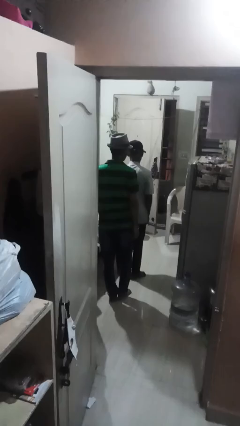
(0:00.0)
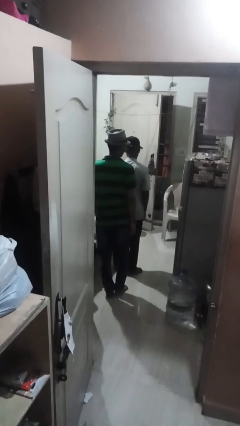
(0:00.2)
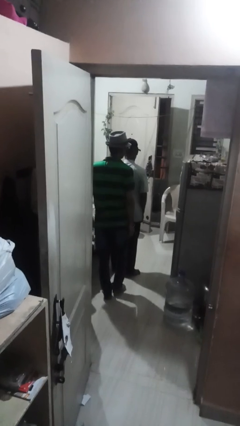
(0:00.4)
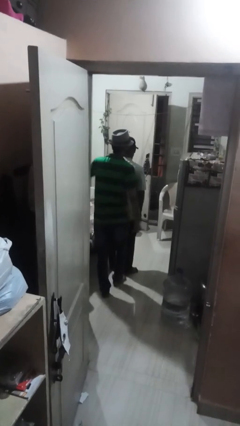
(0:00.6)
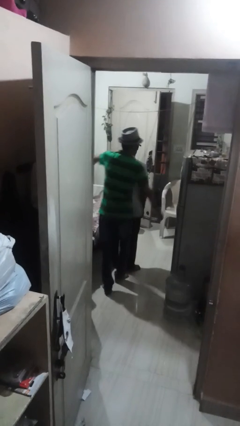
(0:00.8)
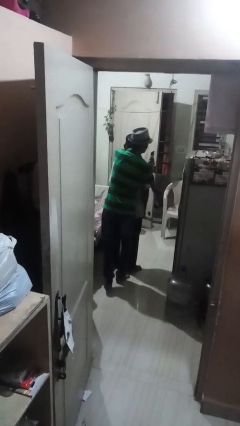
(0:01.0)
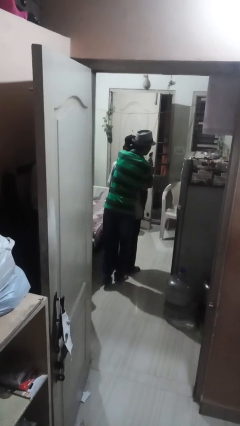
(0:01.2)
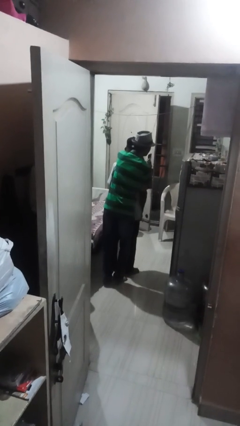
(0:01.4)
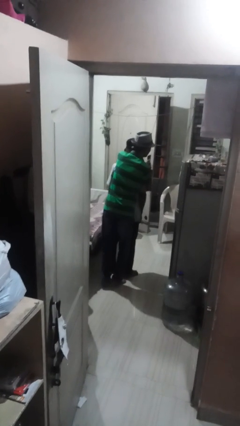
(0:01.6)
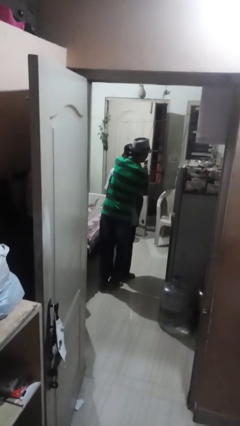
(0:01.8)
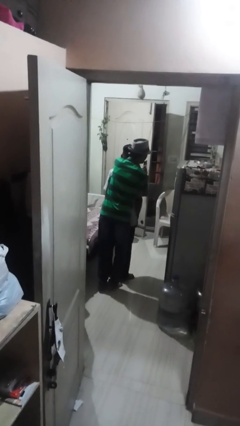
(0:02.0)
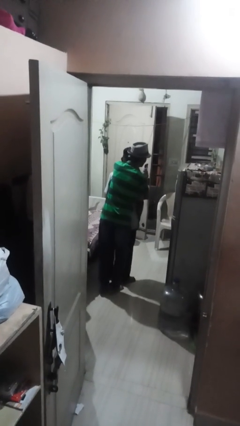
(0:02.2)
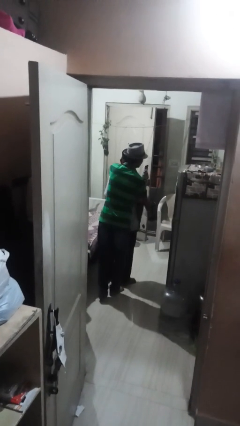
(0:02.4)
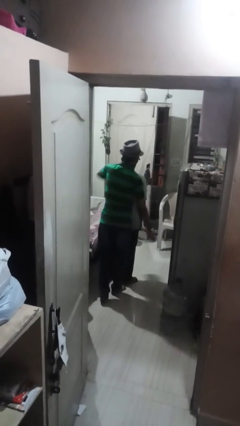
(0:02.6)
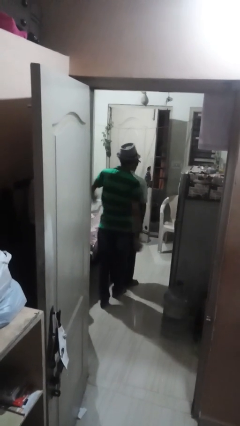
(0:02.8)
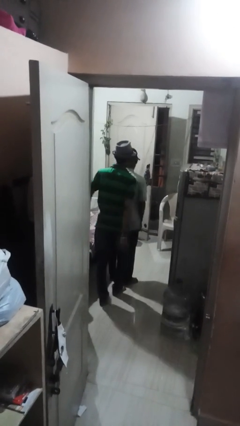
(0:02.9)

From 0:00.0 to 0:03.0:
person hugs person from behind

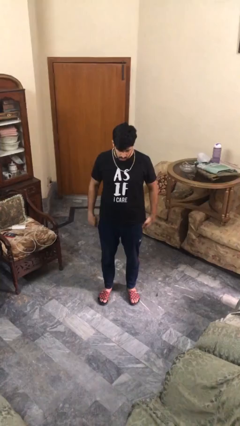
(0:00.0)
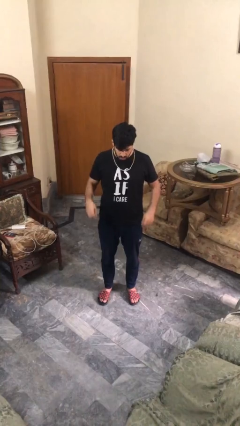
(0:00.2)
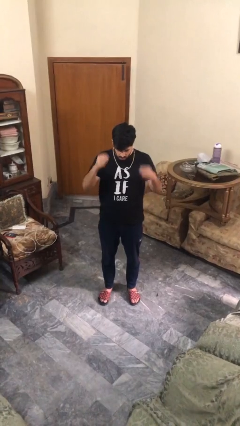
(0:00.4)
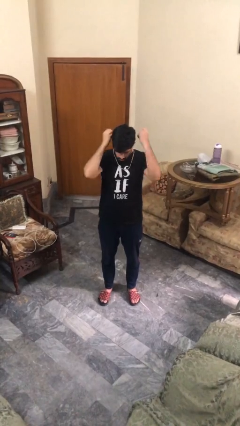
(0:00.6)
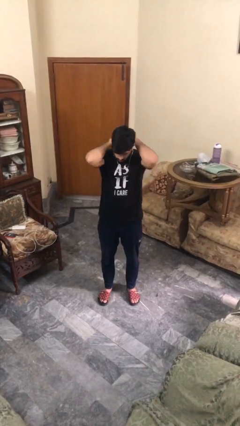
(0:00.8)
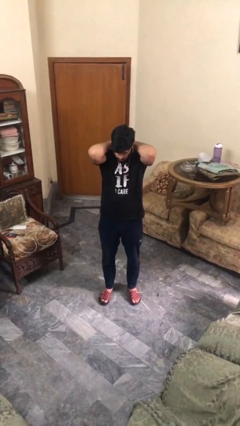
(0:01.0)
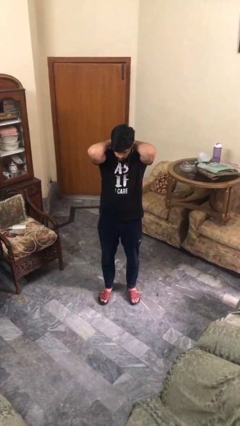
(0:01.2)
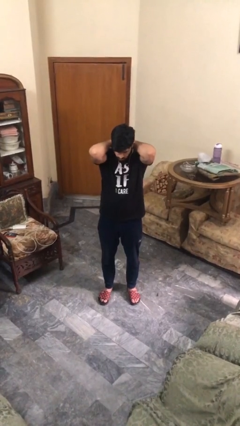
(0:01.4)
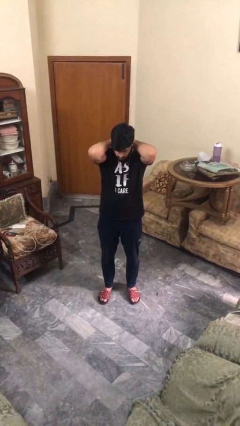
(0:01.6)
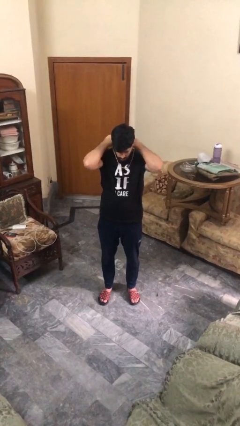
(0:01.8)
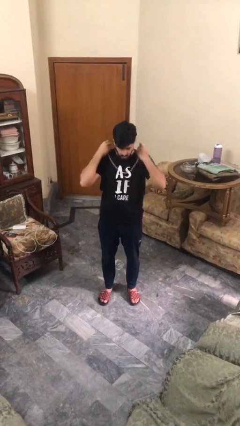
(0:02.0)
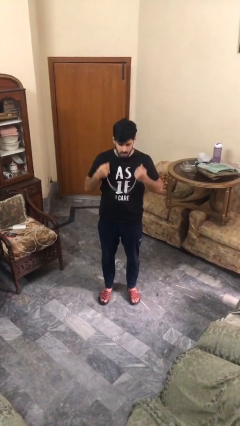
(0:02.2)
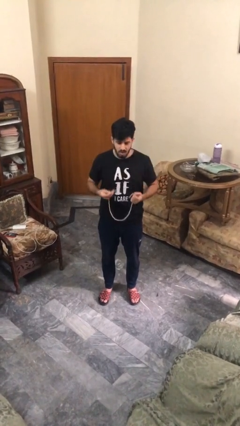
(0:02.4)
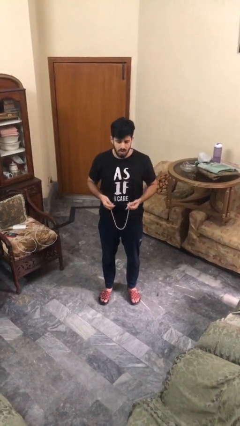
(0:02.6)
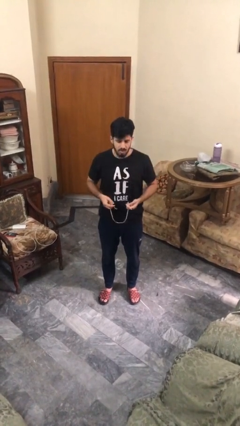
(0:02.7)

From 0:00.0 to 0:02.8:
person takes off necklace

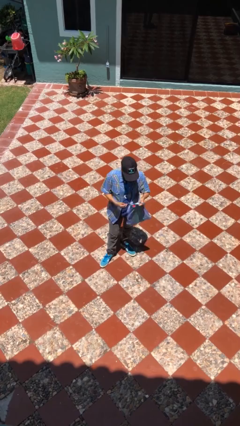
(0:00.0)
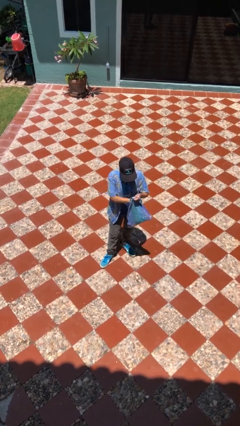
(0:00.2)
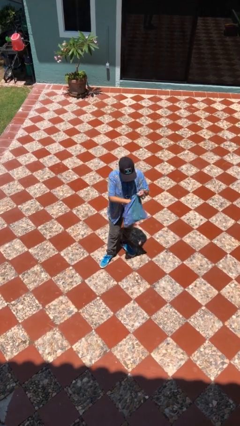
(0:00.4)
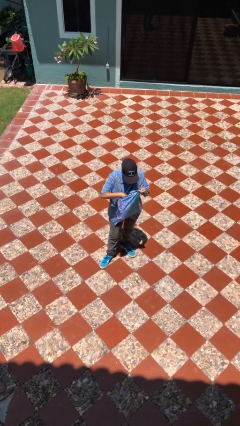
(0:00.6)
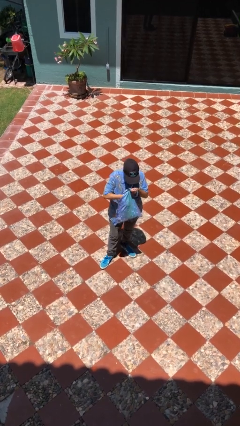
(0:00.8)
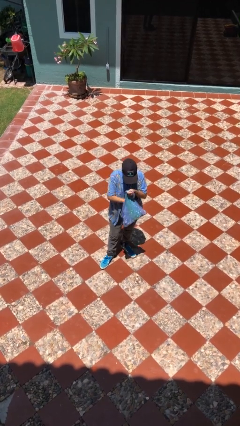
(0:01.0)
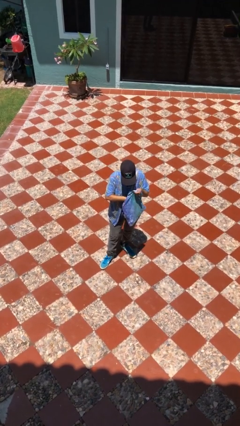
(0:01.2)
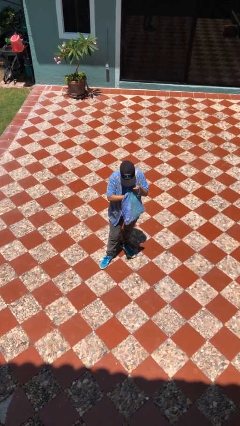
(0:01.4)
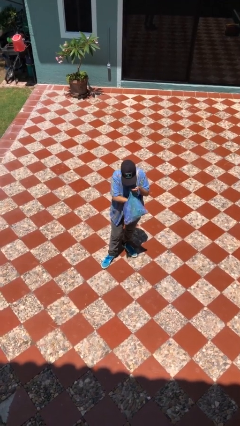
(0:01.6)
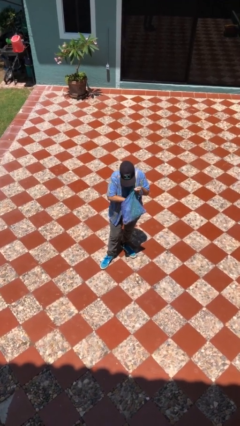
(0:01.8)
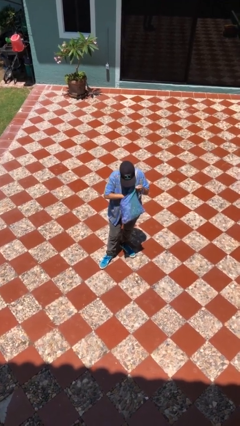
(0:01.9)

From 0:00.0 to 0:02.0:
person searches in purse

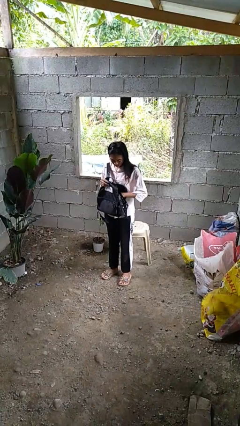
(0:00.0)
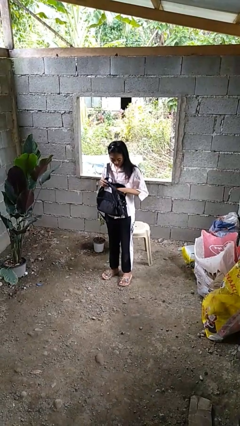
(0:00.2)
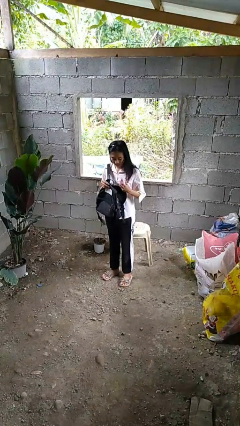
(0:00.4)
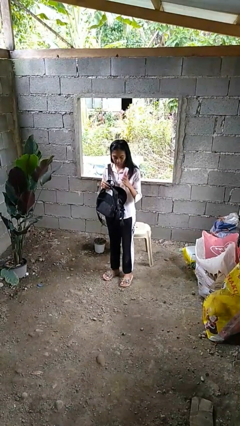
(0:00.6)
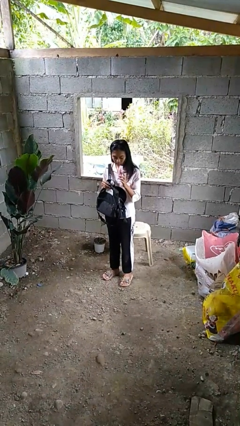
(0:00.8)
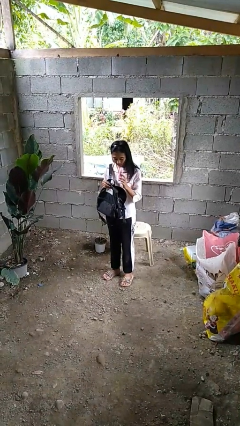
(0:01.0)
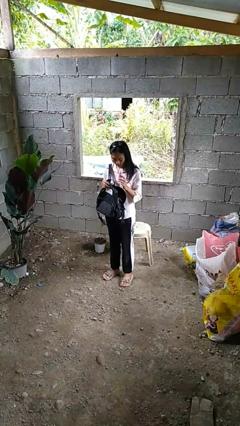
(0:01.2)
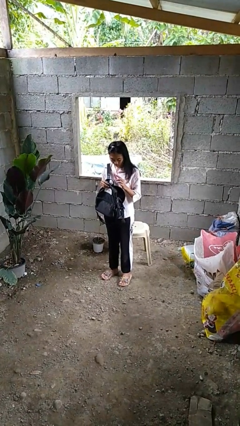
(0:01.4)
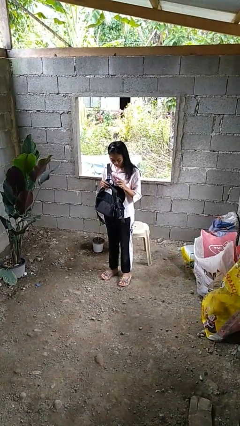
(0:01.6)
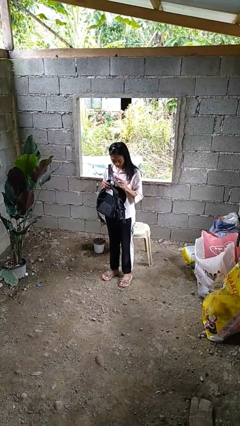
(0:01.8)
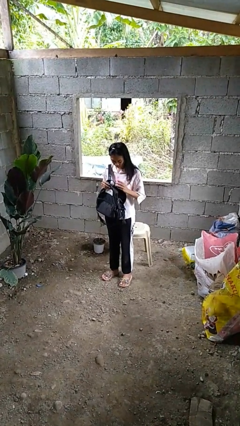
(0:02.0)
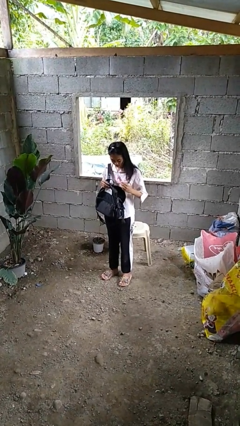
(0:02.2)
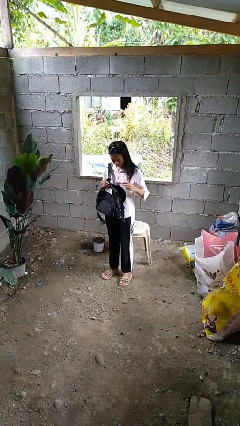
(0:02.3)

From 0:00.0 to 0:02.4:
person takes object from backpack

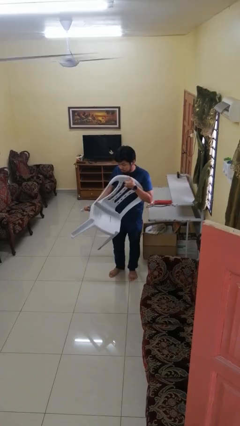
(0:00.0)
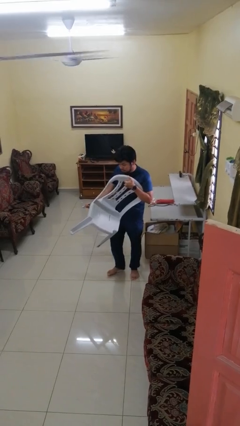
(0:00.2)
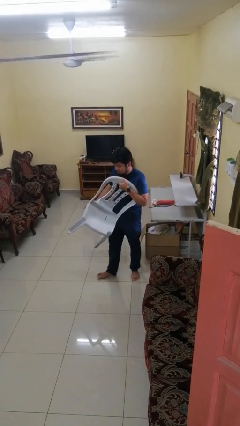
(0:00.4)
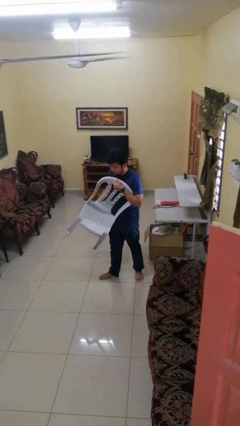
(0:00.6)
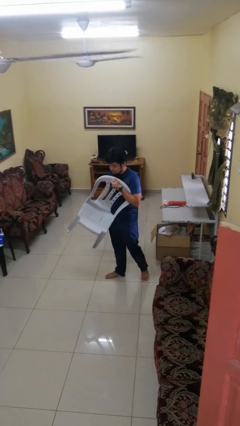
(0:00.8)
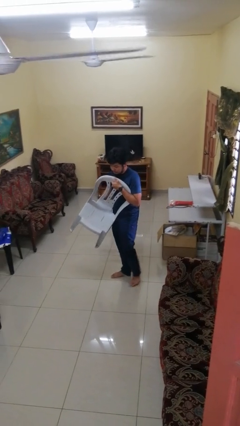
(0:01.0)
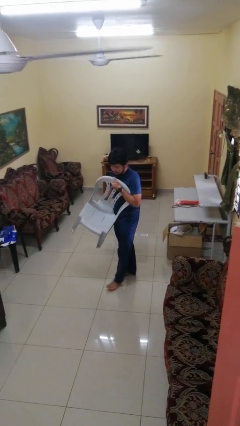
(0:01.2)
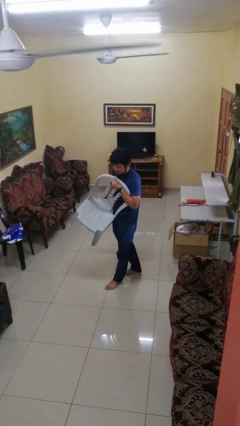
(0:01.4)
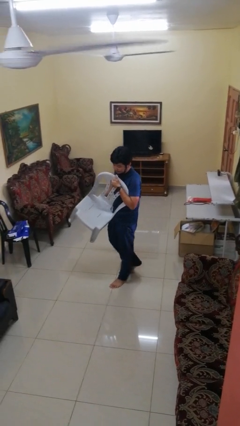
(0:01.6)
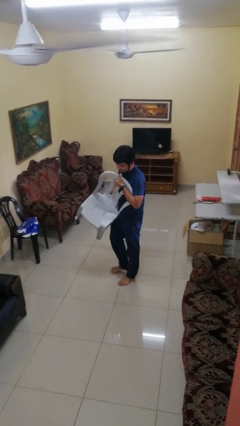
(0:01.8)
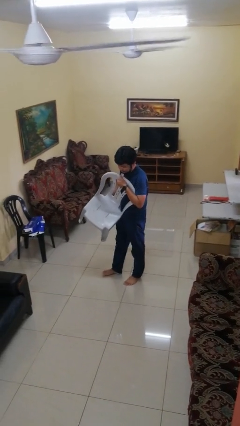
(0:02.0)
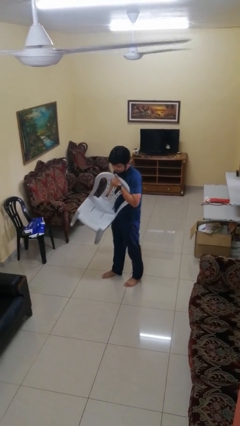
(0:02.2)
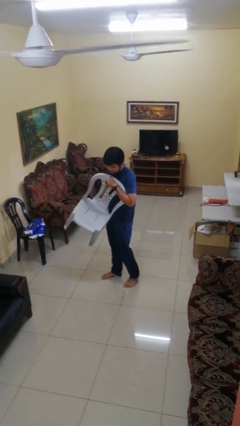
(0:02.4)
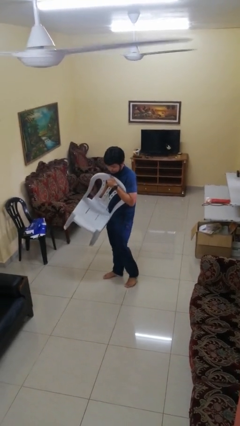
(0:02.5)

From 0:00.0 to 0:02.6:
person carries furniture

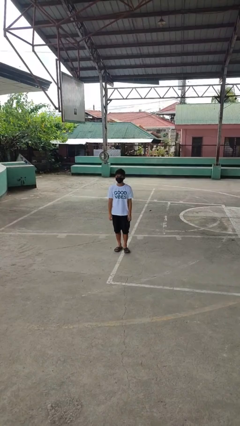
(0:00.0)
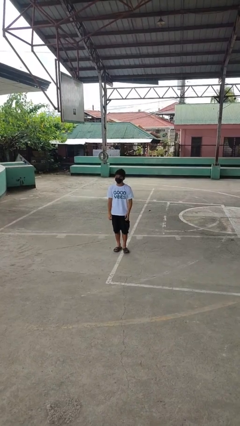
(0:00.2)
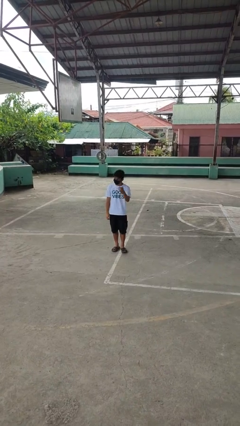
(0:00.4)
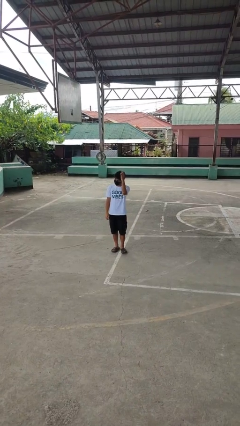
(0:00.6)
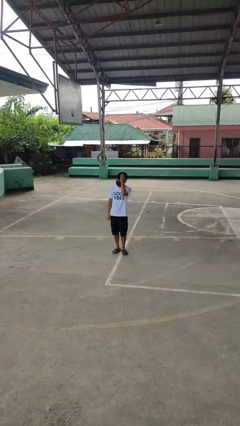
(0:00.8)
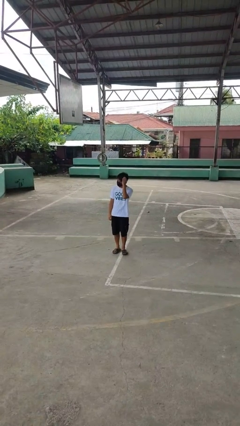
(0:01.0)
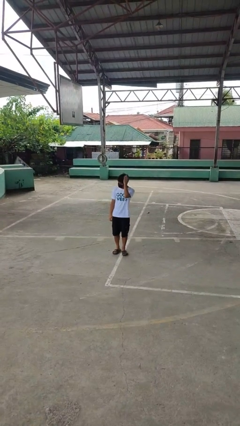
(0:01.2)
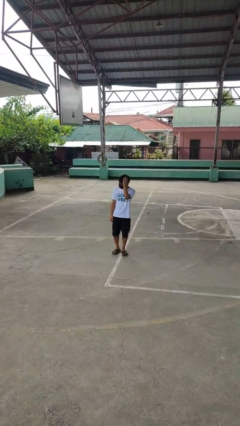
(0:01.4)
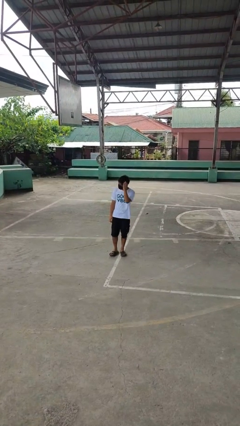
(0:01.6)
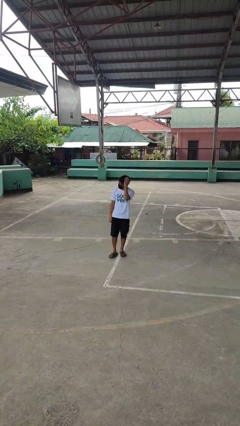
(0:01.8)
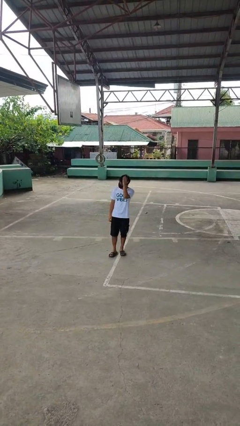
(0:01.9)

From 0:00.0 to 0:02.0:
person pats head

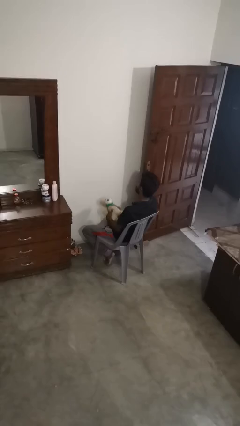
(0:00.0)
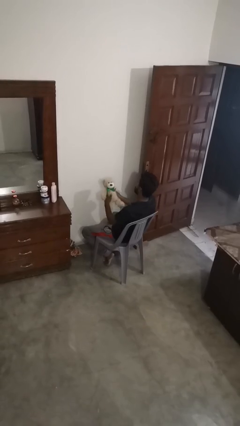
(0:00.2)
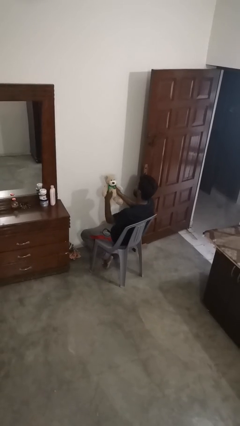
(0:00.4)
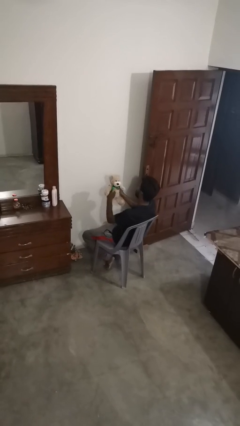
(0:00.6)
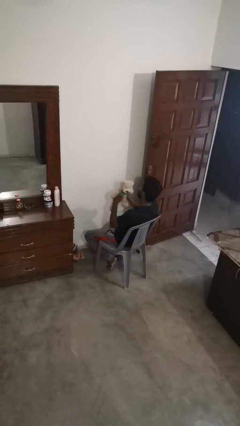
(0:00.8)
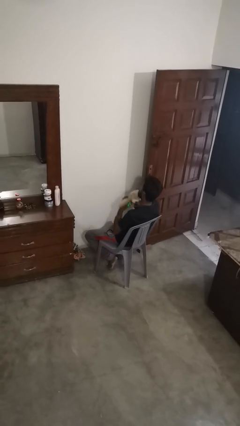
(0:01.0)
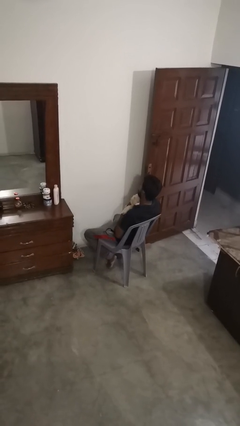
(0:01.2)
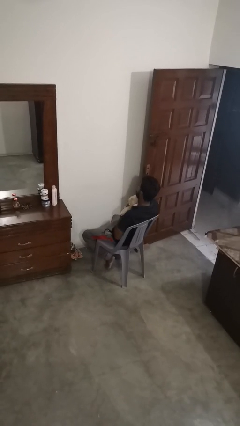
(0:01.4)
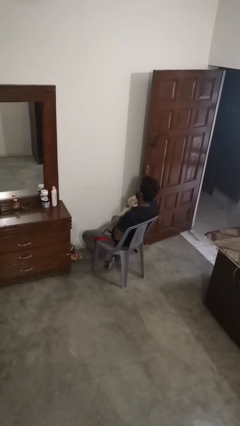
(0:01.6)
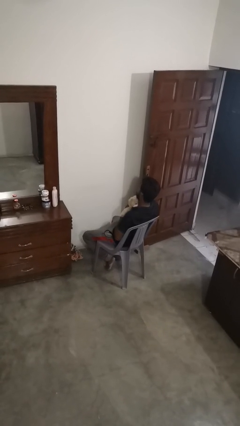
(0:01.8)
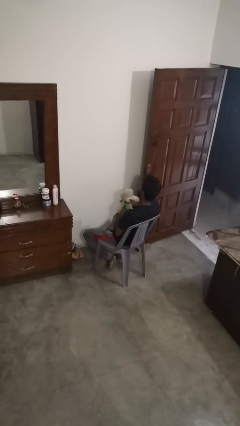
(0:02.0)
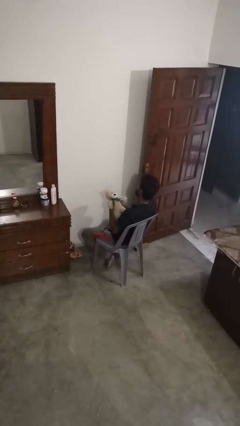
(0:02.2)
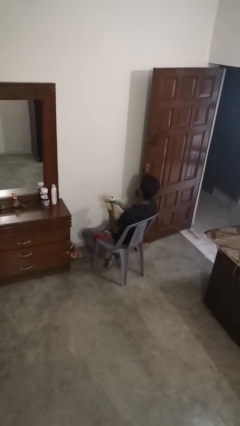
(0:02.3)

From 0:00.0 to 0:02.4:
person hugs stuffed animal
